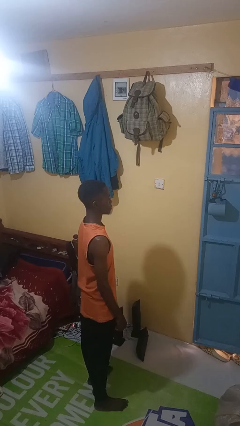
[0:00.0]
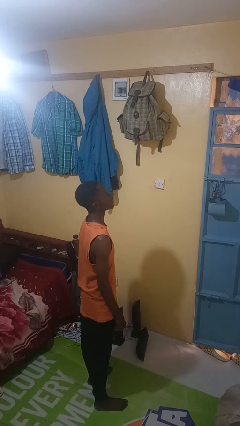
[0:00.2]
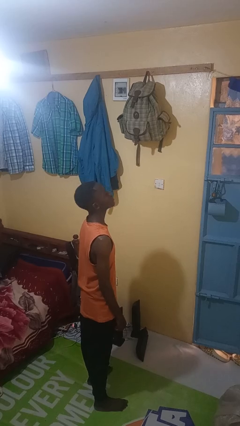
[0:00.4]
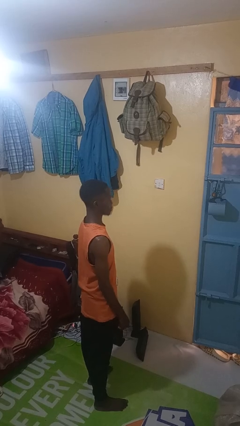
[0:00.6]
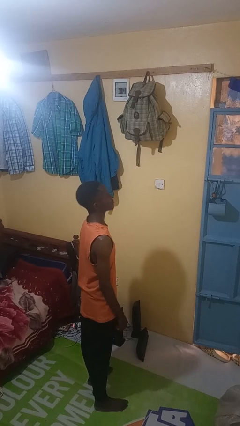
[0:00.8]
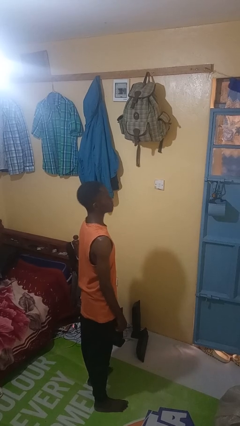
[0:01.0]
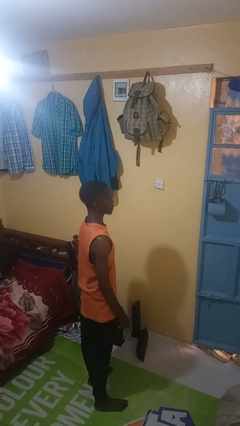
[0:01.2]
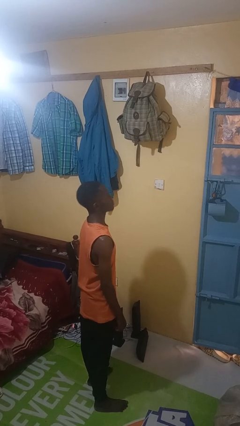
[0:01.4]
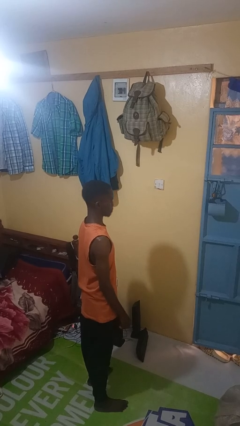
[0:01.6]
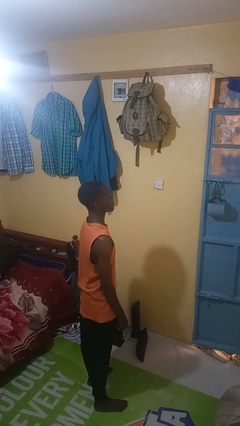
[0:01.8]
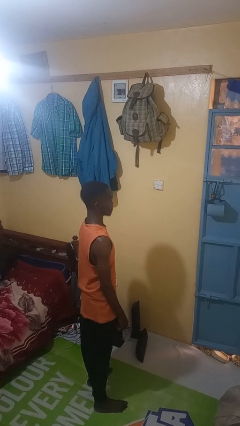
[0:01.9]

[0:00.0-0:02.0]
person nods head

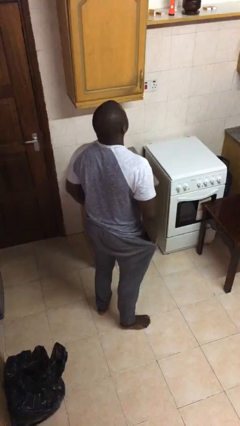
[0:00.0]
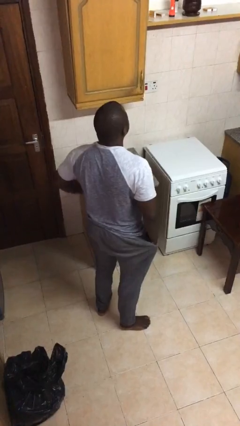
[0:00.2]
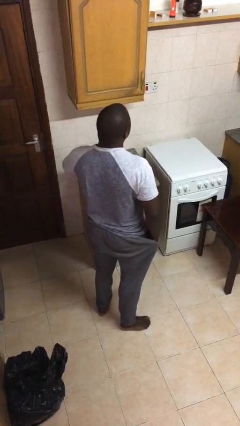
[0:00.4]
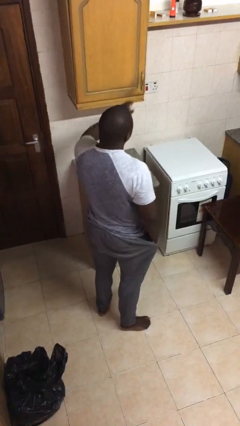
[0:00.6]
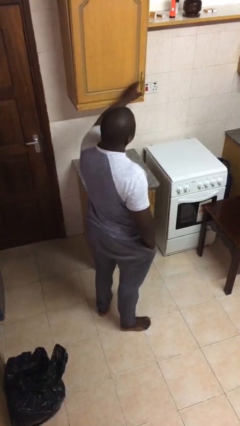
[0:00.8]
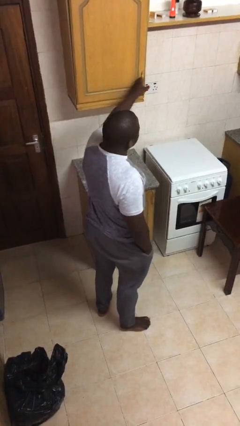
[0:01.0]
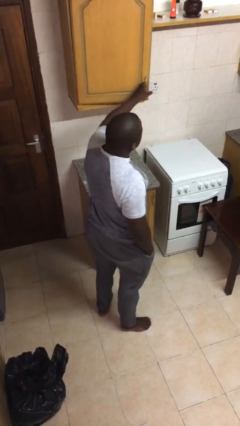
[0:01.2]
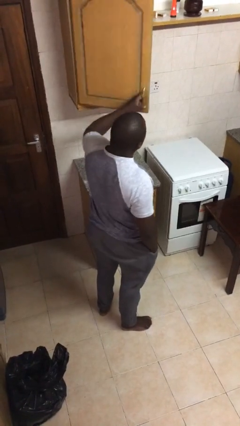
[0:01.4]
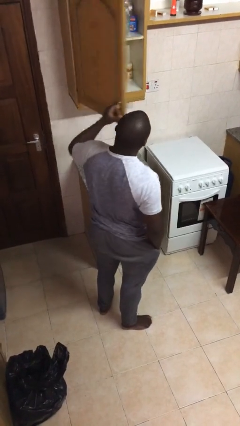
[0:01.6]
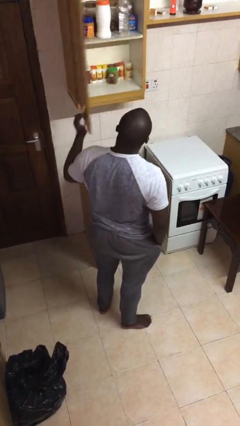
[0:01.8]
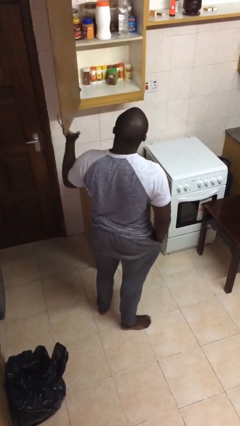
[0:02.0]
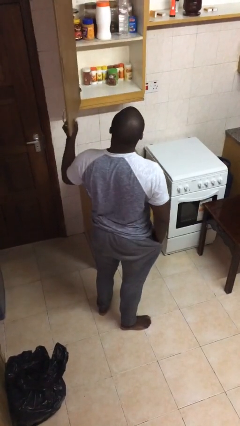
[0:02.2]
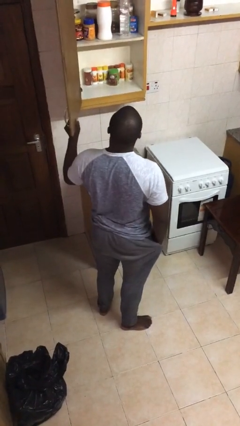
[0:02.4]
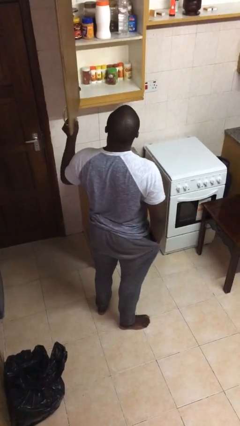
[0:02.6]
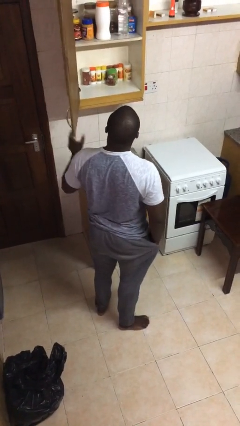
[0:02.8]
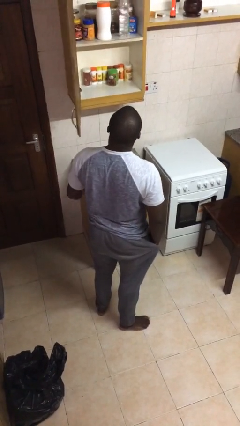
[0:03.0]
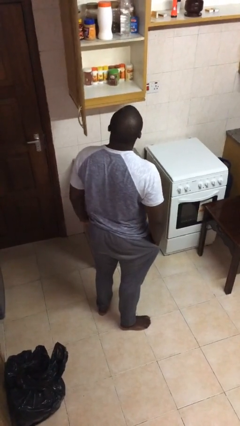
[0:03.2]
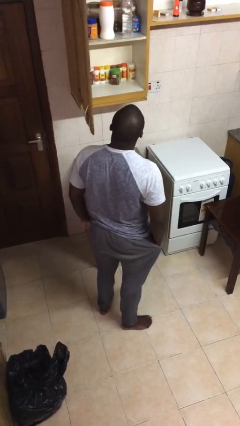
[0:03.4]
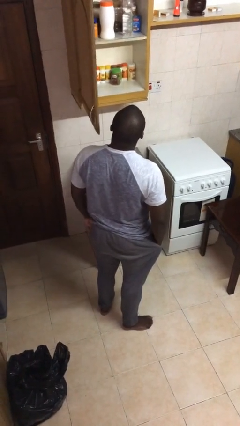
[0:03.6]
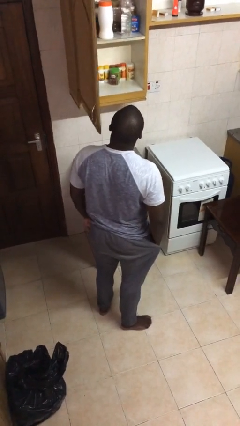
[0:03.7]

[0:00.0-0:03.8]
person opens cabinet

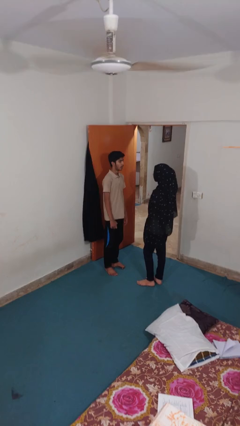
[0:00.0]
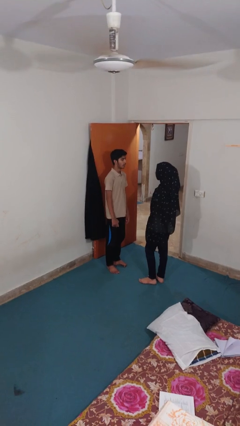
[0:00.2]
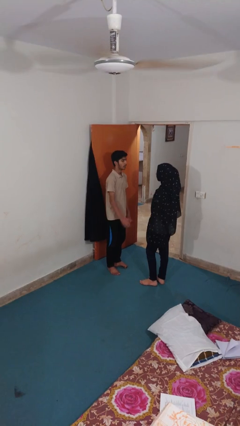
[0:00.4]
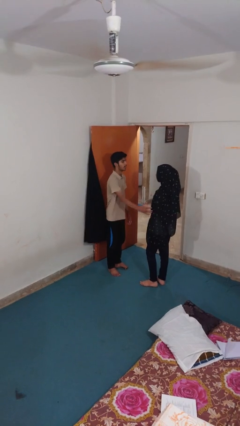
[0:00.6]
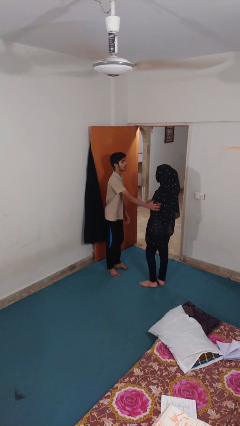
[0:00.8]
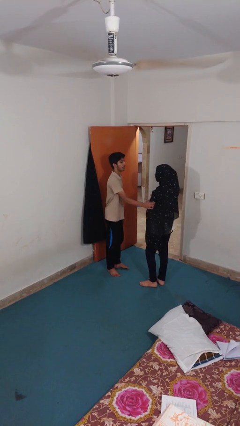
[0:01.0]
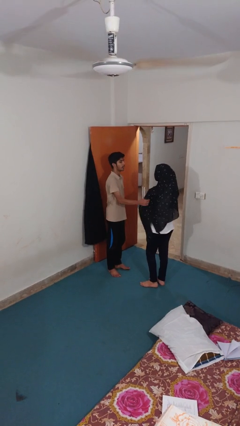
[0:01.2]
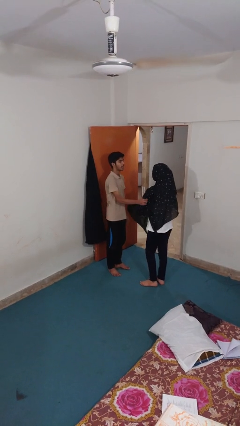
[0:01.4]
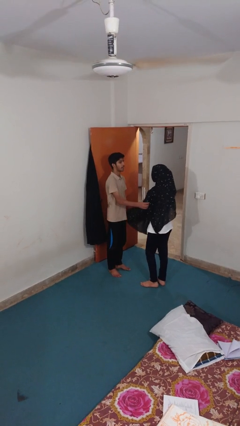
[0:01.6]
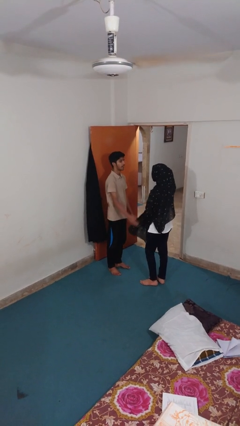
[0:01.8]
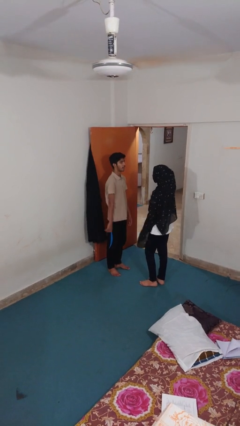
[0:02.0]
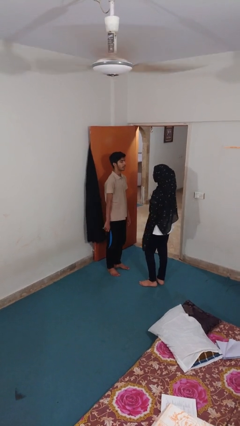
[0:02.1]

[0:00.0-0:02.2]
person grabs person by bicep

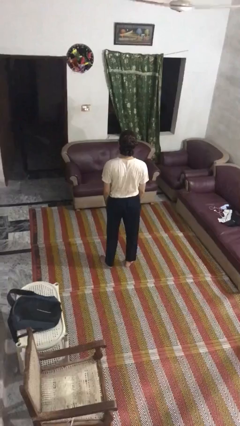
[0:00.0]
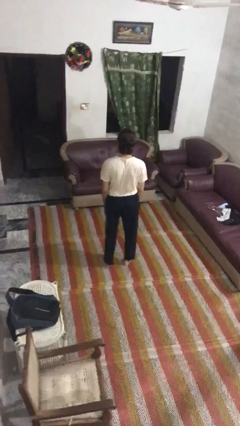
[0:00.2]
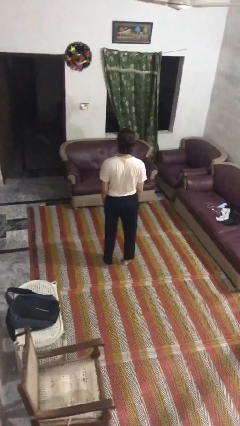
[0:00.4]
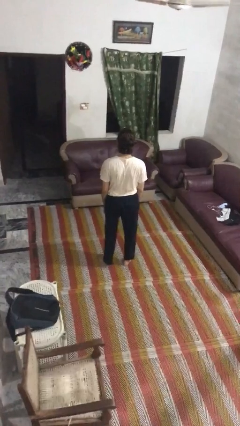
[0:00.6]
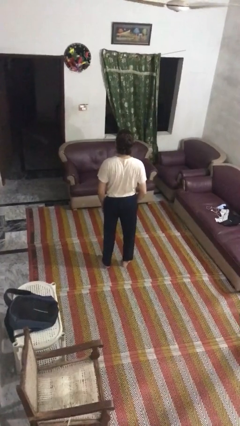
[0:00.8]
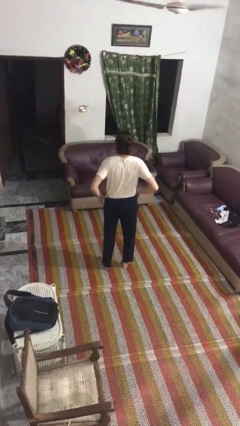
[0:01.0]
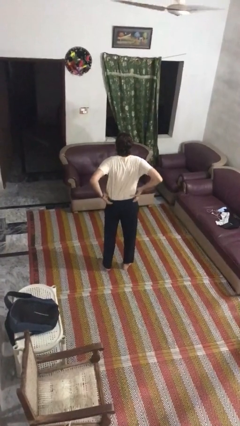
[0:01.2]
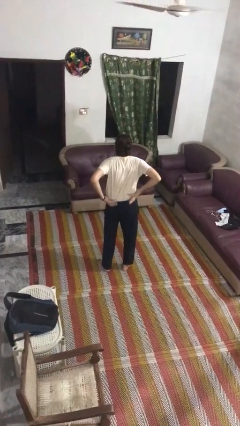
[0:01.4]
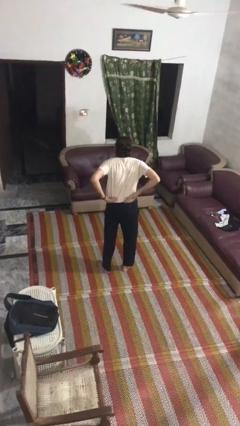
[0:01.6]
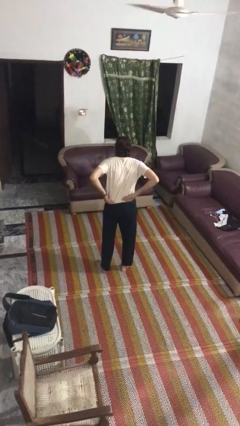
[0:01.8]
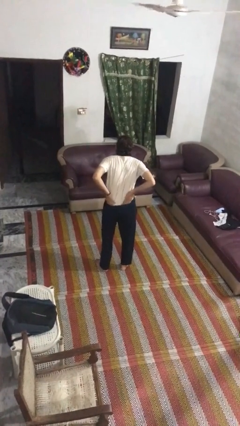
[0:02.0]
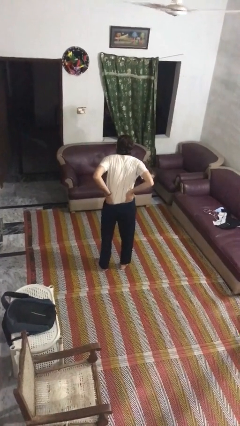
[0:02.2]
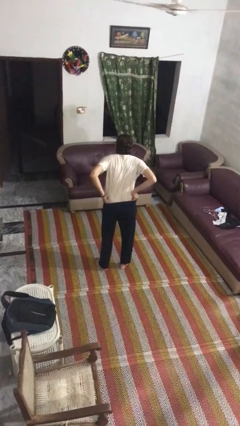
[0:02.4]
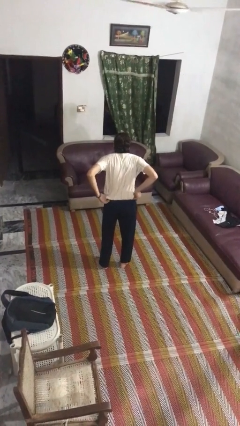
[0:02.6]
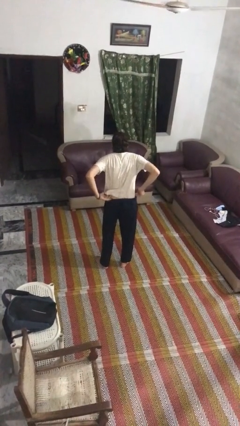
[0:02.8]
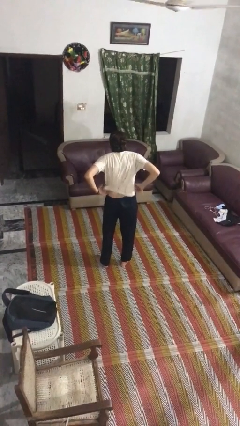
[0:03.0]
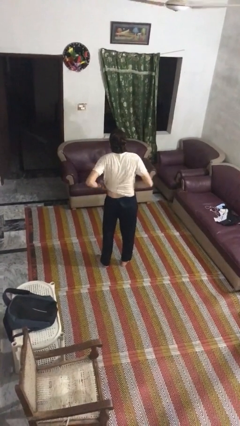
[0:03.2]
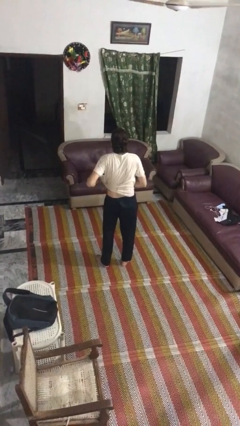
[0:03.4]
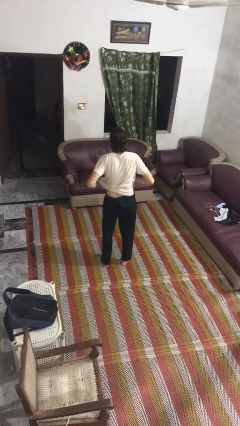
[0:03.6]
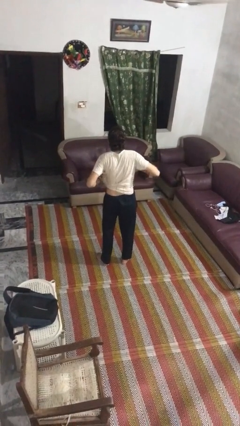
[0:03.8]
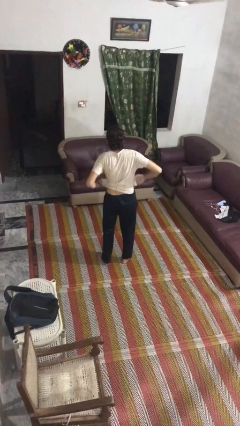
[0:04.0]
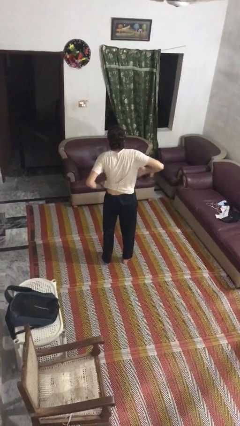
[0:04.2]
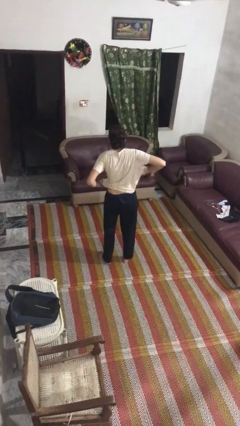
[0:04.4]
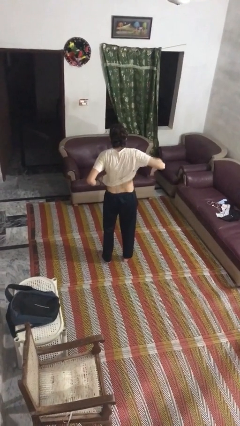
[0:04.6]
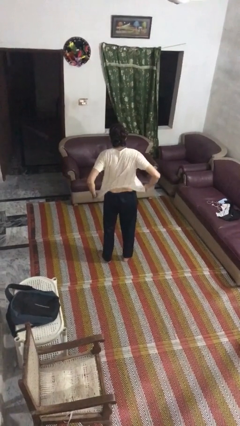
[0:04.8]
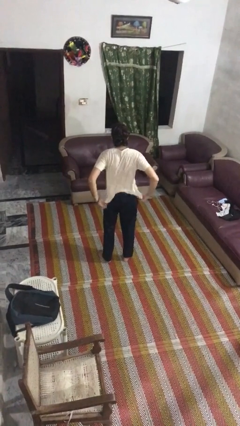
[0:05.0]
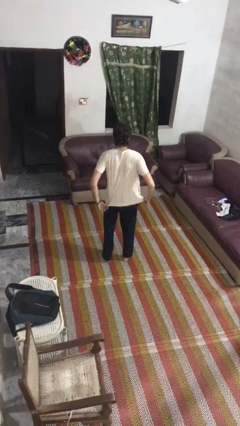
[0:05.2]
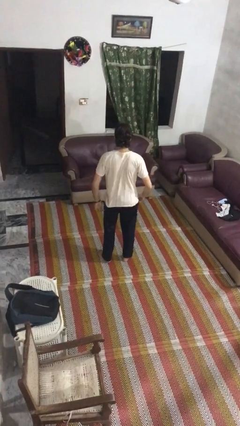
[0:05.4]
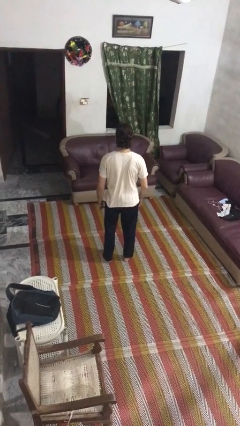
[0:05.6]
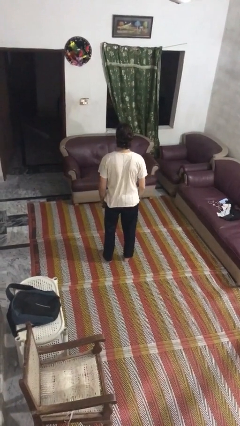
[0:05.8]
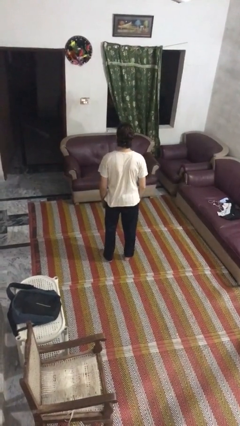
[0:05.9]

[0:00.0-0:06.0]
person untucks shirt

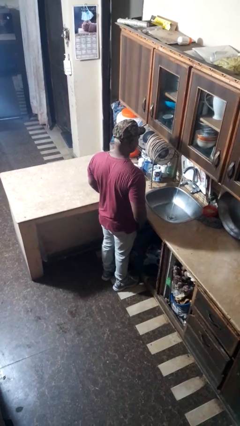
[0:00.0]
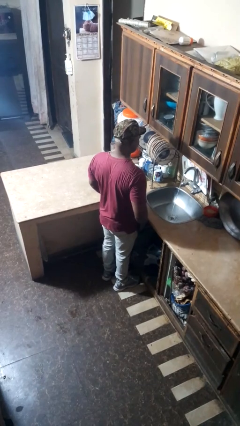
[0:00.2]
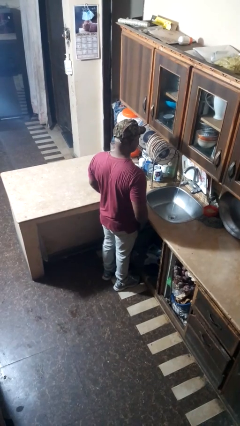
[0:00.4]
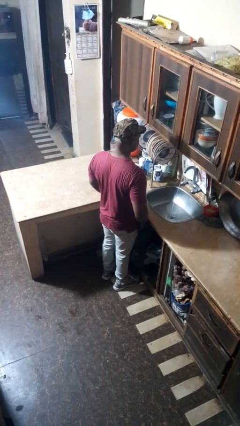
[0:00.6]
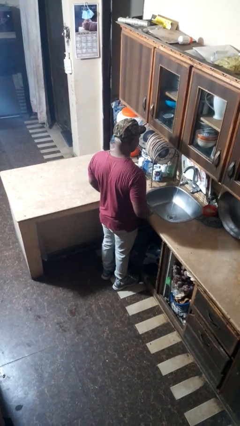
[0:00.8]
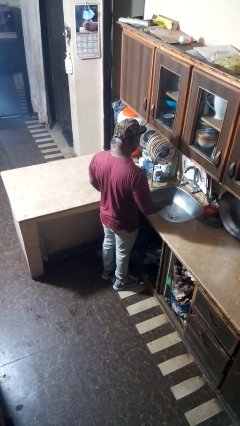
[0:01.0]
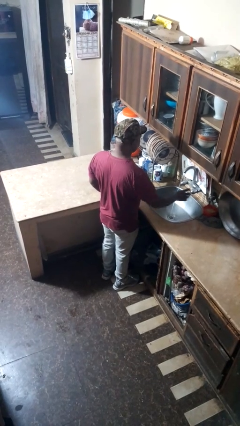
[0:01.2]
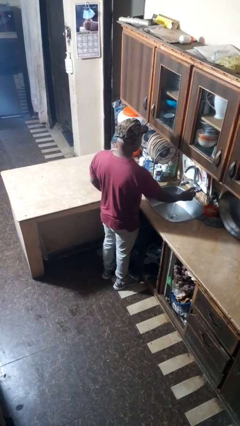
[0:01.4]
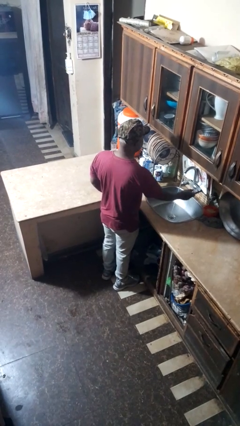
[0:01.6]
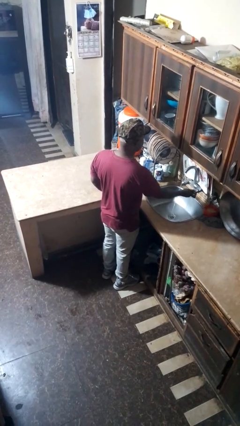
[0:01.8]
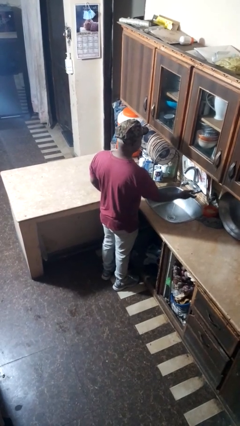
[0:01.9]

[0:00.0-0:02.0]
person turns off faucet

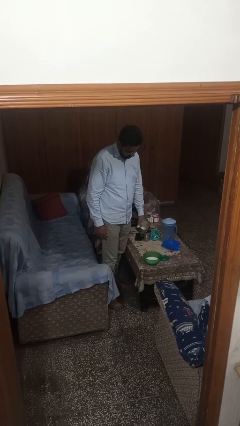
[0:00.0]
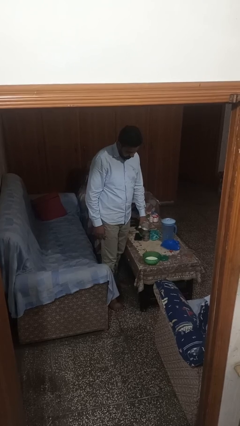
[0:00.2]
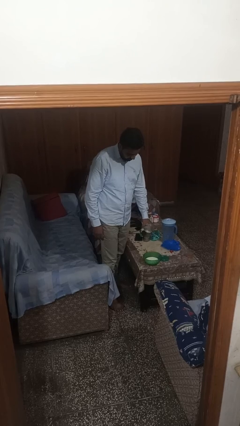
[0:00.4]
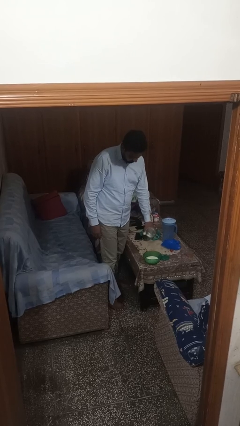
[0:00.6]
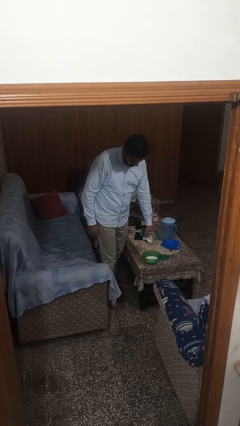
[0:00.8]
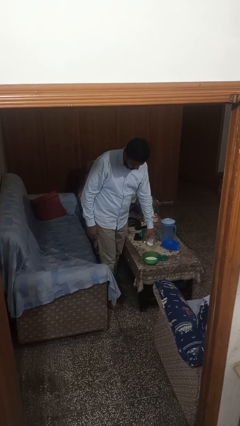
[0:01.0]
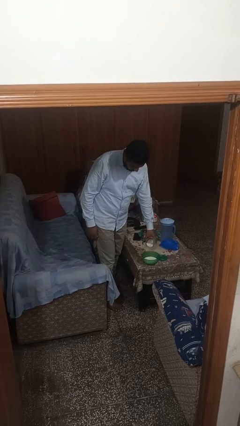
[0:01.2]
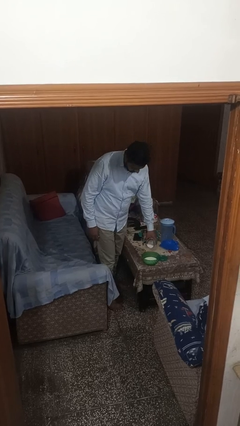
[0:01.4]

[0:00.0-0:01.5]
person pours into bowl
